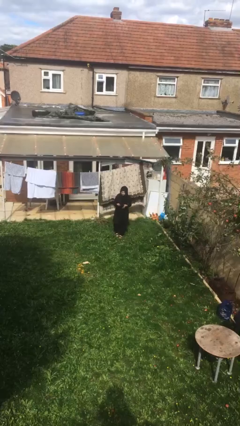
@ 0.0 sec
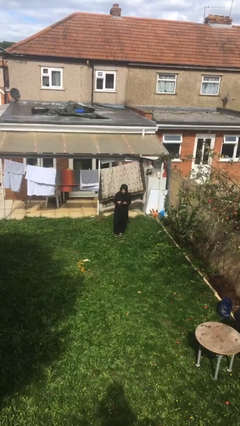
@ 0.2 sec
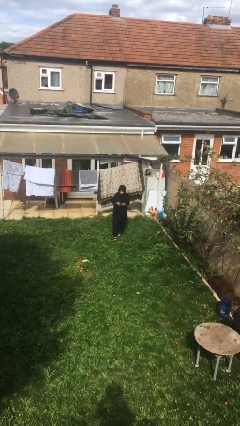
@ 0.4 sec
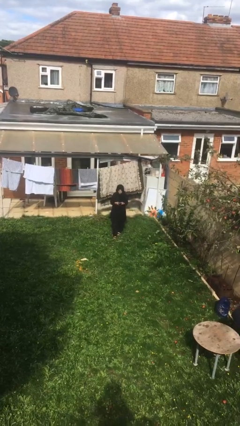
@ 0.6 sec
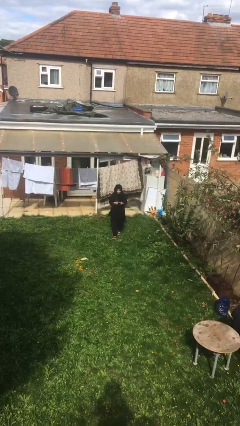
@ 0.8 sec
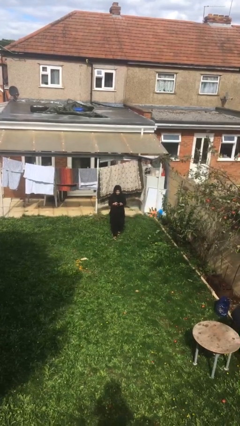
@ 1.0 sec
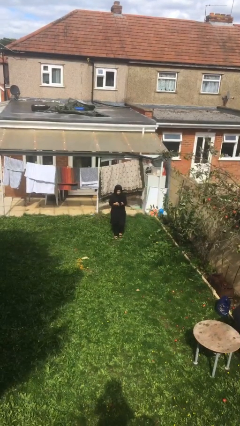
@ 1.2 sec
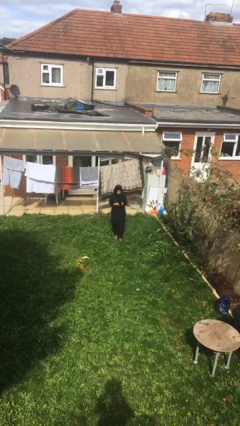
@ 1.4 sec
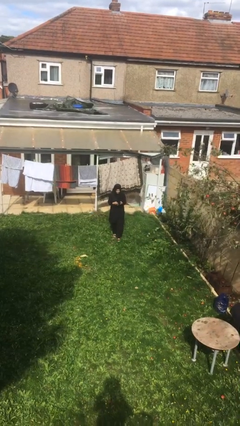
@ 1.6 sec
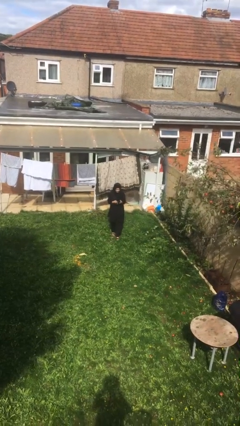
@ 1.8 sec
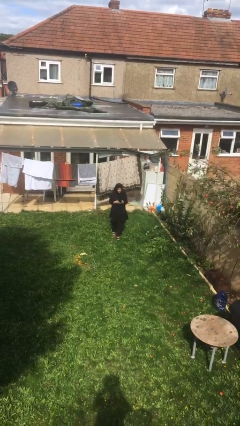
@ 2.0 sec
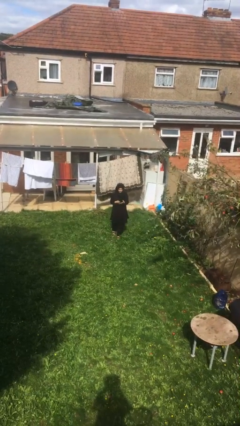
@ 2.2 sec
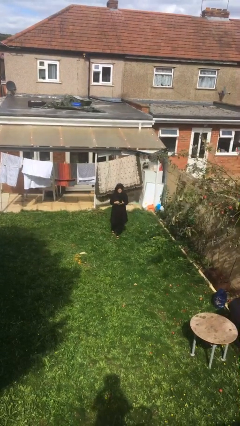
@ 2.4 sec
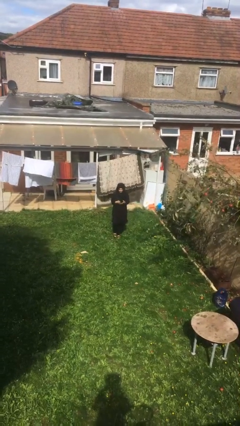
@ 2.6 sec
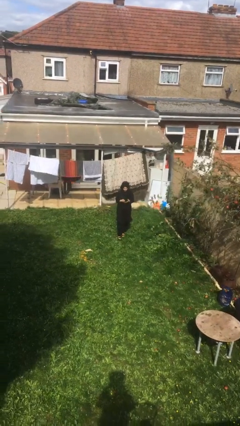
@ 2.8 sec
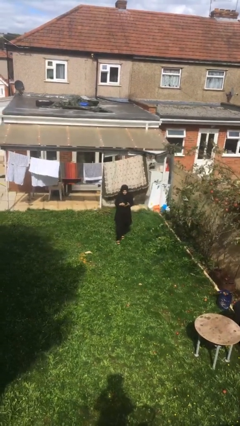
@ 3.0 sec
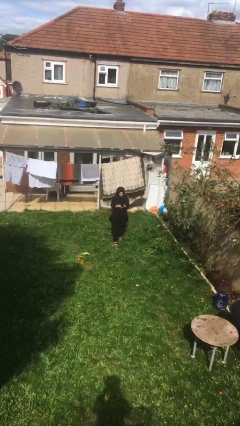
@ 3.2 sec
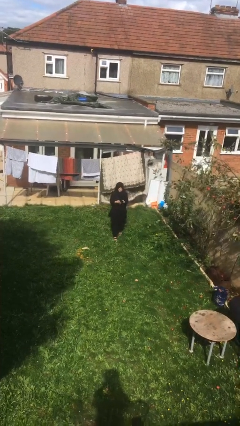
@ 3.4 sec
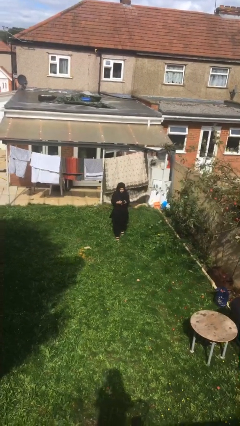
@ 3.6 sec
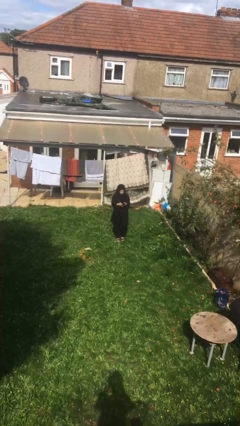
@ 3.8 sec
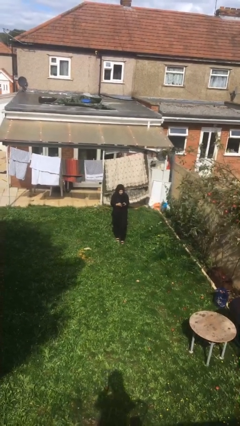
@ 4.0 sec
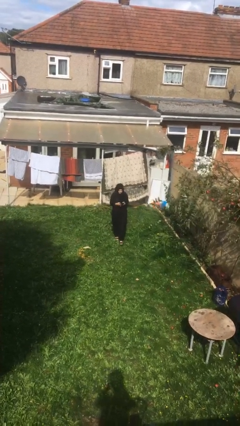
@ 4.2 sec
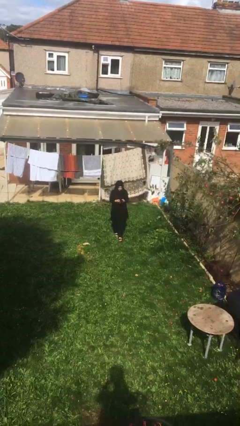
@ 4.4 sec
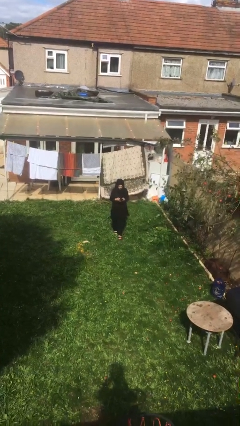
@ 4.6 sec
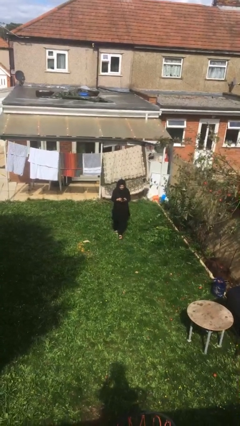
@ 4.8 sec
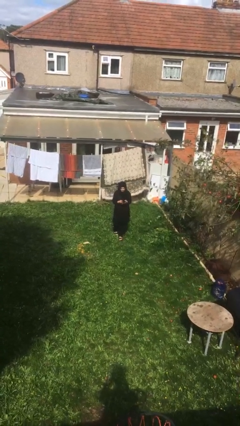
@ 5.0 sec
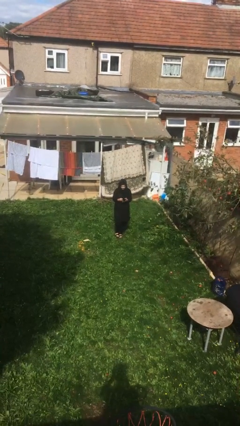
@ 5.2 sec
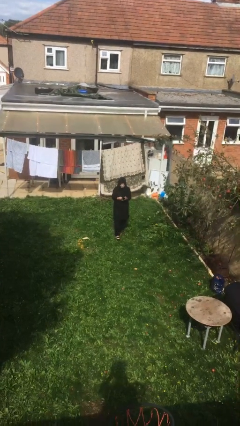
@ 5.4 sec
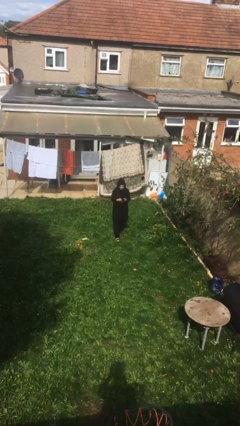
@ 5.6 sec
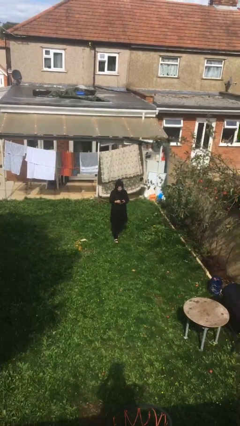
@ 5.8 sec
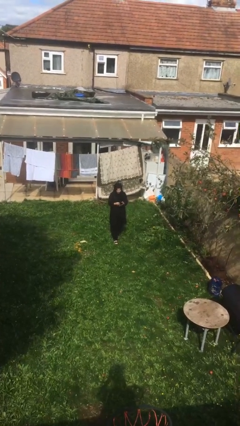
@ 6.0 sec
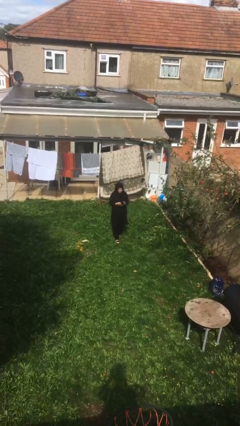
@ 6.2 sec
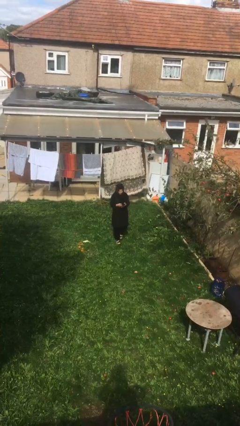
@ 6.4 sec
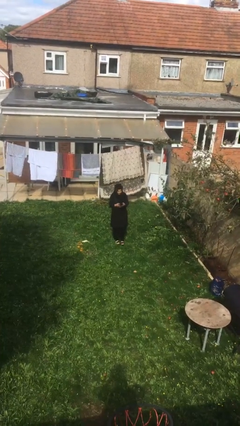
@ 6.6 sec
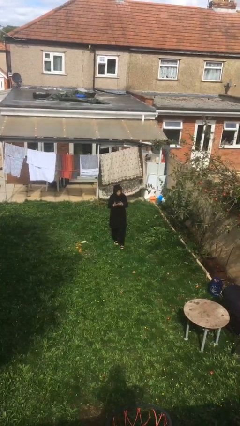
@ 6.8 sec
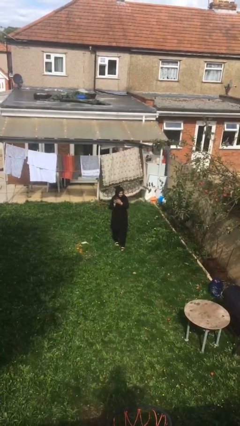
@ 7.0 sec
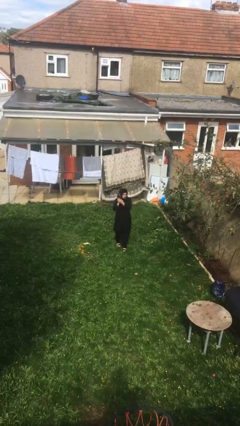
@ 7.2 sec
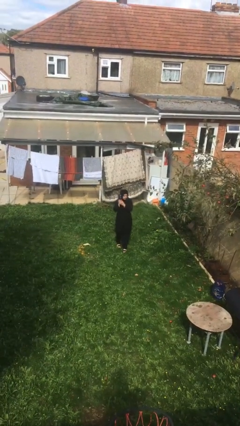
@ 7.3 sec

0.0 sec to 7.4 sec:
person texts on phone

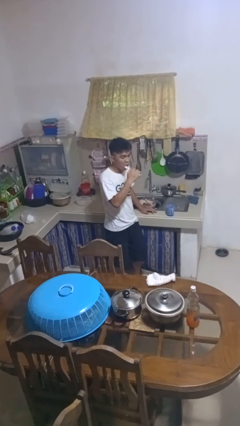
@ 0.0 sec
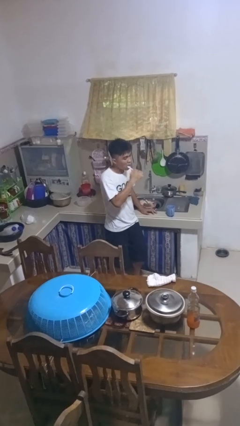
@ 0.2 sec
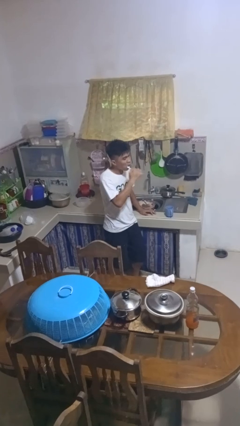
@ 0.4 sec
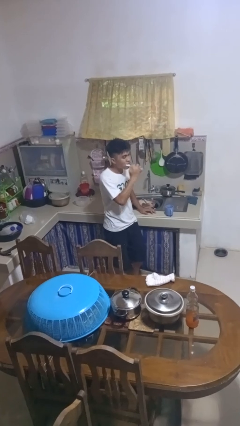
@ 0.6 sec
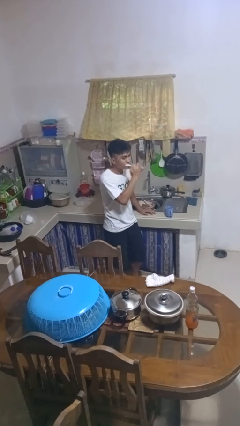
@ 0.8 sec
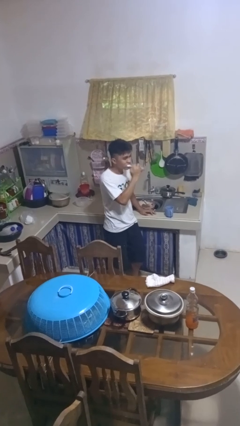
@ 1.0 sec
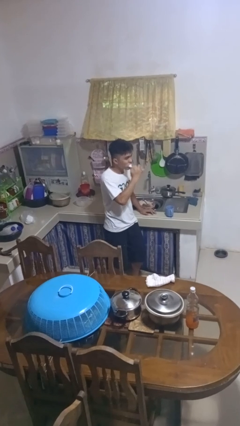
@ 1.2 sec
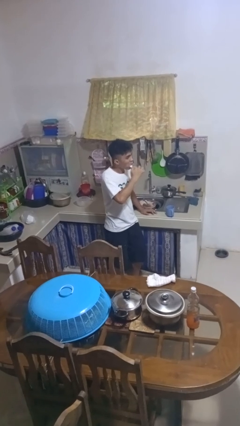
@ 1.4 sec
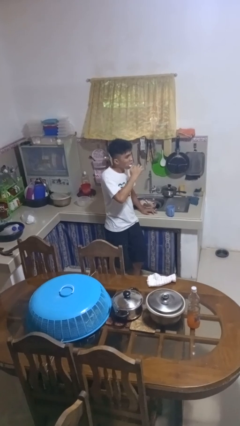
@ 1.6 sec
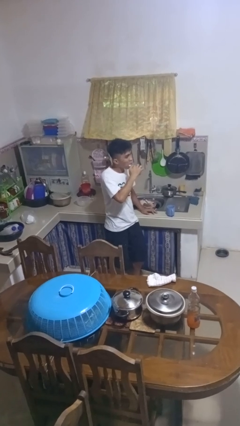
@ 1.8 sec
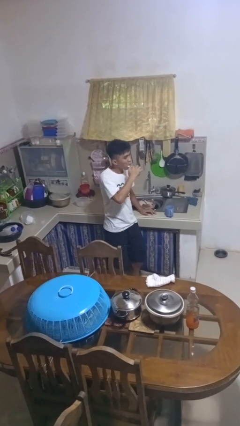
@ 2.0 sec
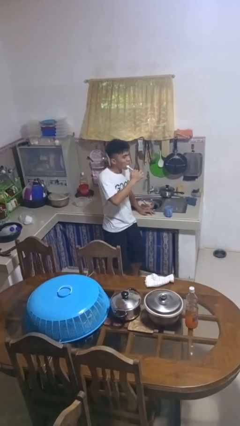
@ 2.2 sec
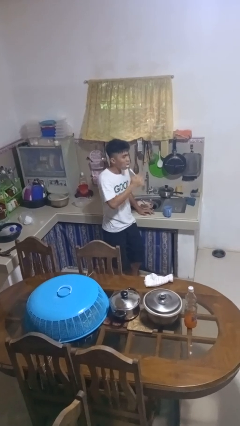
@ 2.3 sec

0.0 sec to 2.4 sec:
person brushes teeth

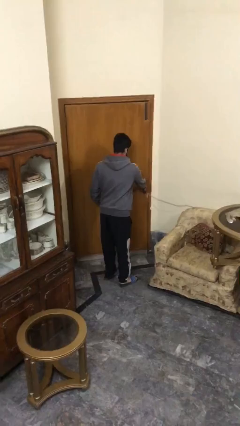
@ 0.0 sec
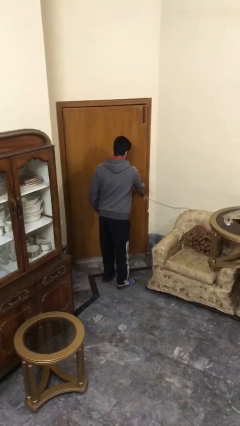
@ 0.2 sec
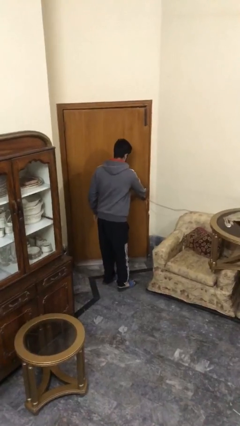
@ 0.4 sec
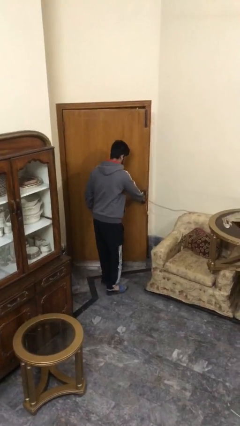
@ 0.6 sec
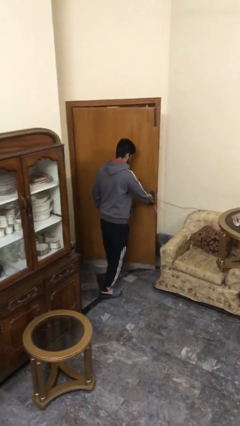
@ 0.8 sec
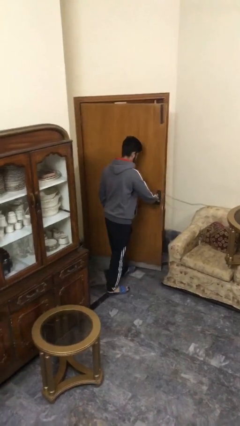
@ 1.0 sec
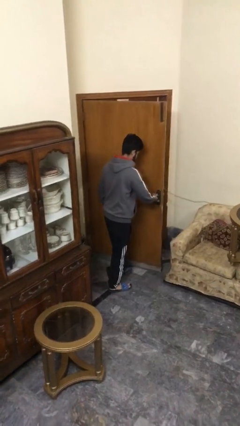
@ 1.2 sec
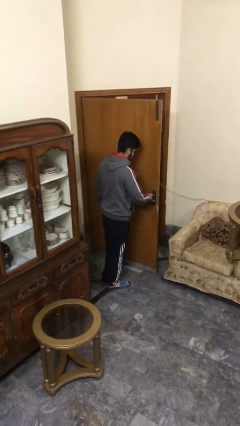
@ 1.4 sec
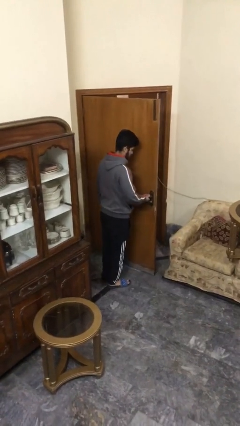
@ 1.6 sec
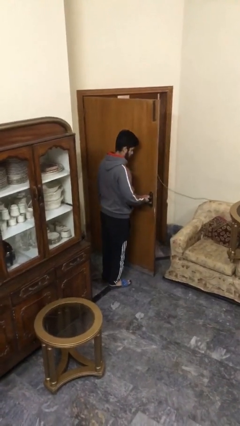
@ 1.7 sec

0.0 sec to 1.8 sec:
person opens facility door

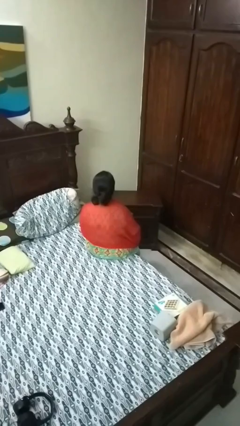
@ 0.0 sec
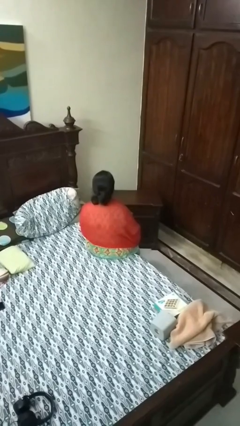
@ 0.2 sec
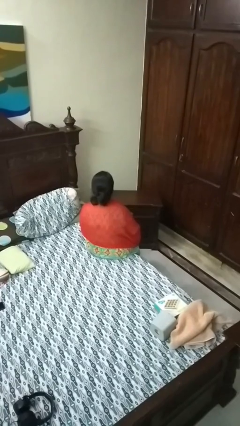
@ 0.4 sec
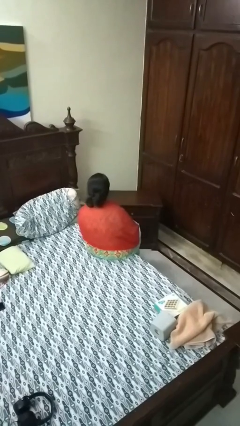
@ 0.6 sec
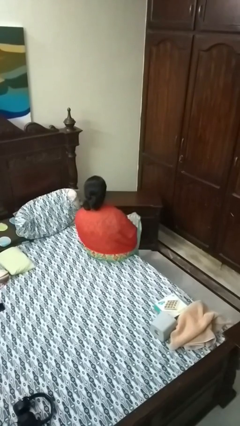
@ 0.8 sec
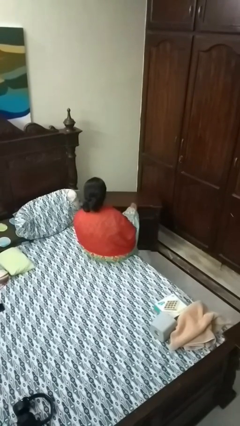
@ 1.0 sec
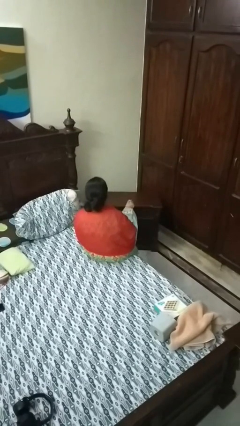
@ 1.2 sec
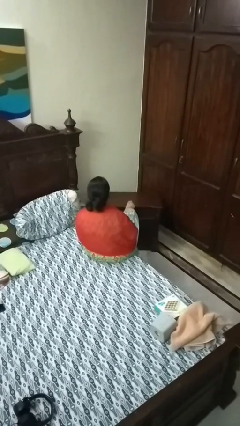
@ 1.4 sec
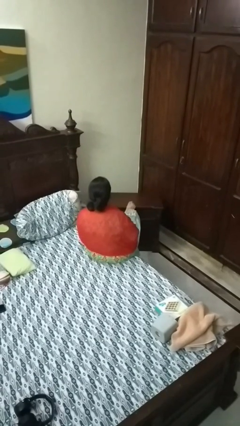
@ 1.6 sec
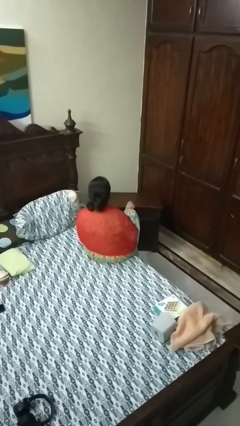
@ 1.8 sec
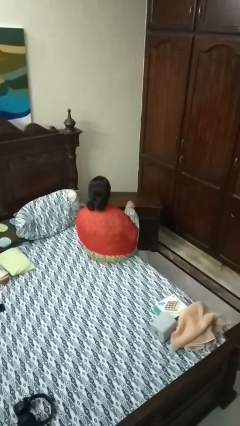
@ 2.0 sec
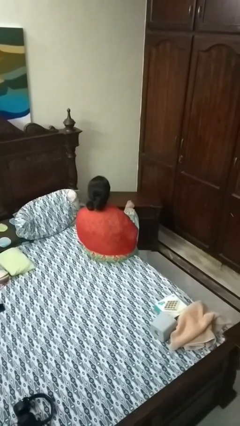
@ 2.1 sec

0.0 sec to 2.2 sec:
person puts feet up

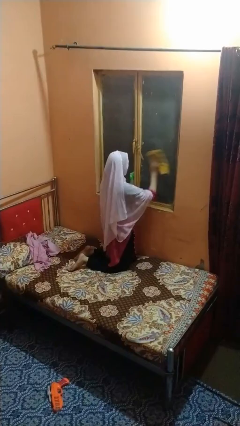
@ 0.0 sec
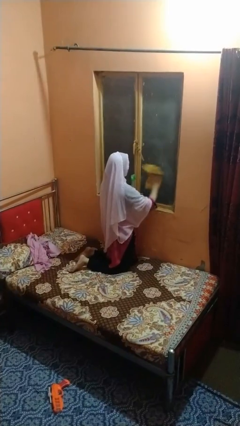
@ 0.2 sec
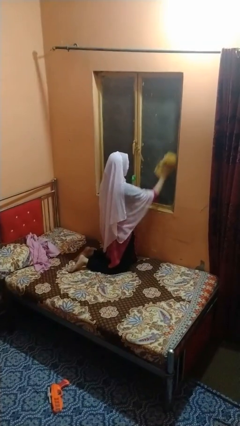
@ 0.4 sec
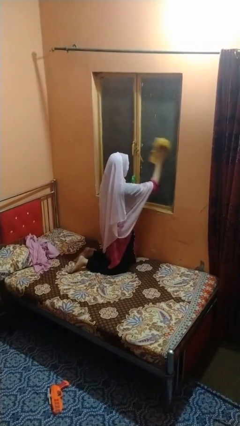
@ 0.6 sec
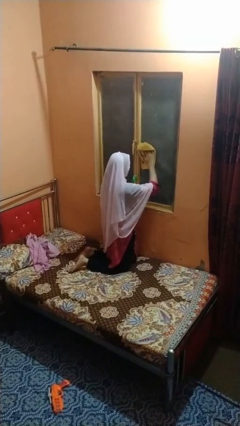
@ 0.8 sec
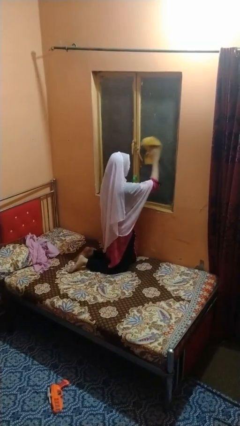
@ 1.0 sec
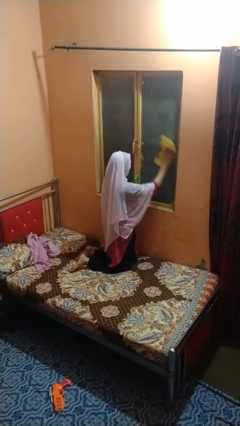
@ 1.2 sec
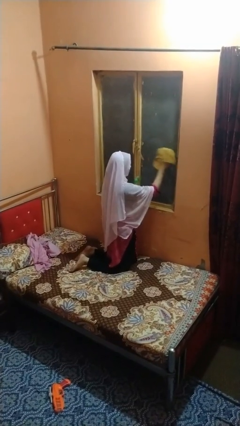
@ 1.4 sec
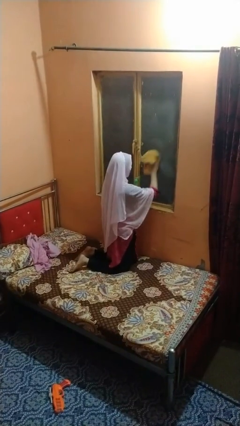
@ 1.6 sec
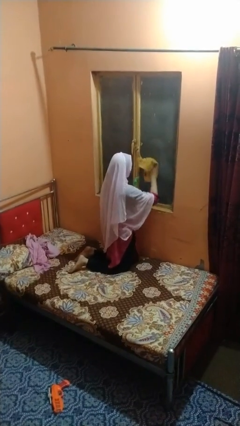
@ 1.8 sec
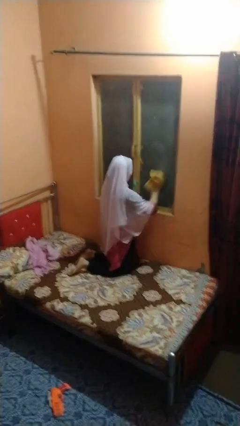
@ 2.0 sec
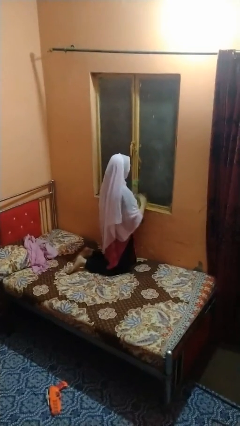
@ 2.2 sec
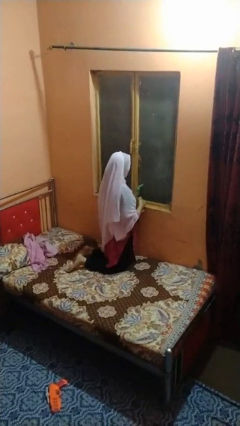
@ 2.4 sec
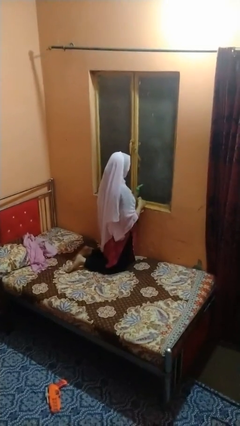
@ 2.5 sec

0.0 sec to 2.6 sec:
person washes window

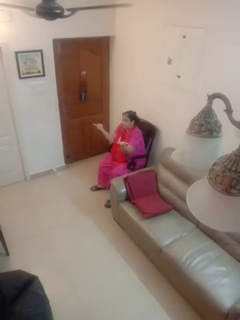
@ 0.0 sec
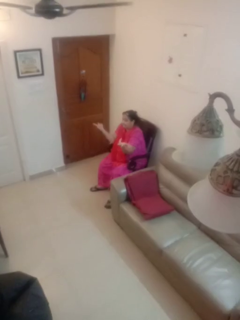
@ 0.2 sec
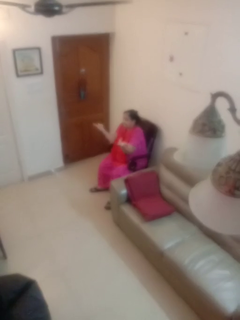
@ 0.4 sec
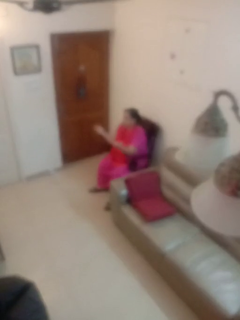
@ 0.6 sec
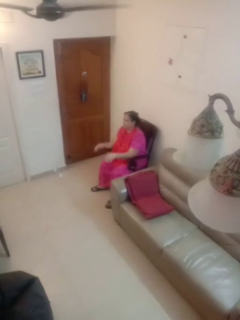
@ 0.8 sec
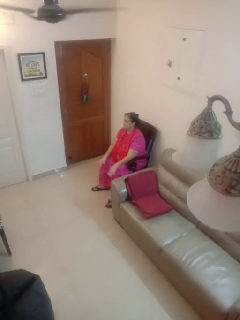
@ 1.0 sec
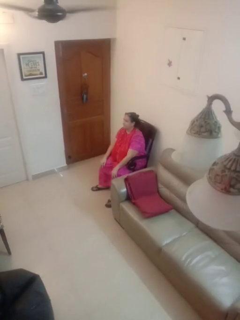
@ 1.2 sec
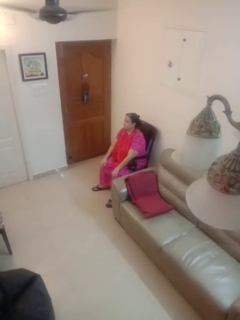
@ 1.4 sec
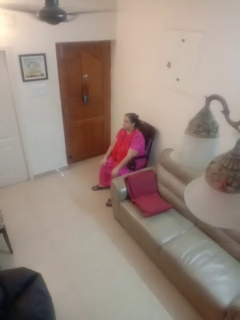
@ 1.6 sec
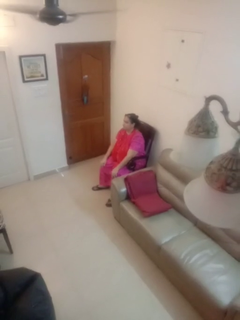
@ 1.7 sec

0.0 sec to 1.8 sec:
person shrugs
